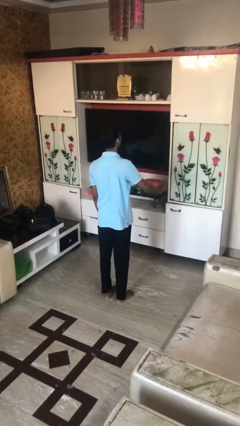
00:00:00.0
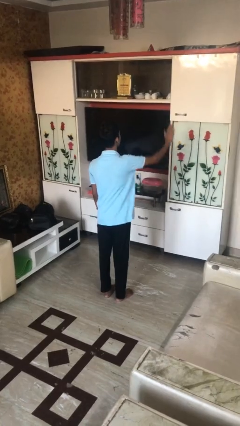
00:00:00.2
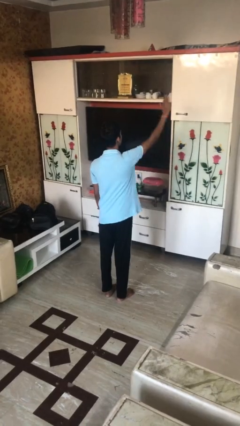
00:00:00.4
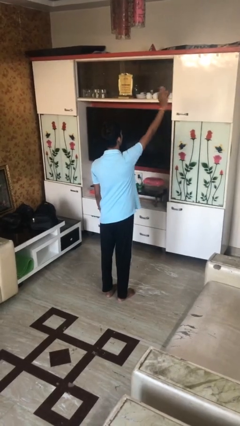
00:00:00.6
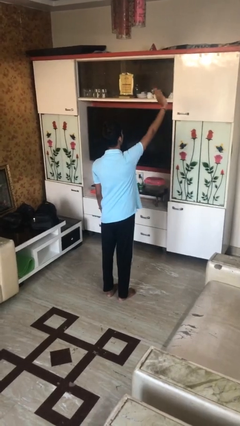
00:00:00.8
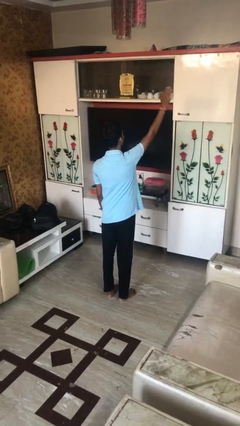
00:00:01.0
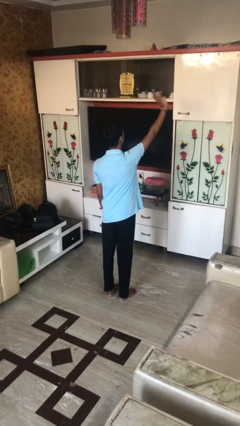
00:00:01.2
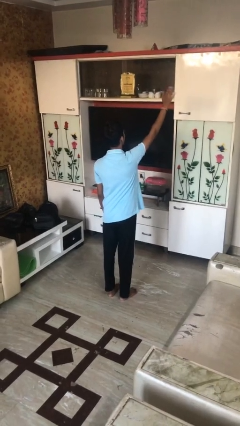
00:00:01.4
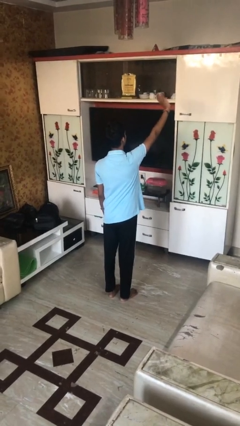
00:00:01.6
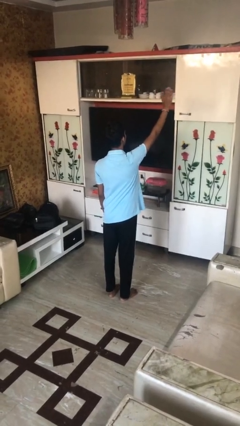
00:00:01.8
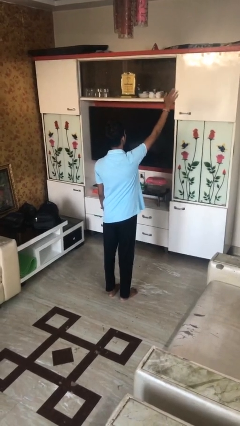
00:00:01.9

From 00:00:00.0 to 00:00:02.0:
person waves at person

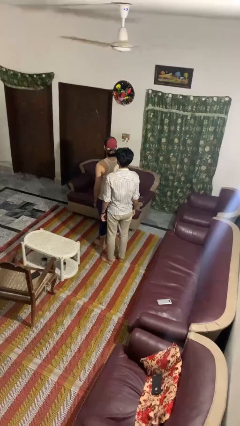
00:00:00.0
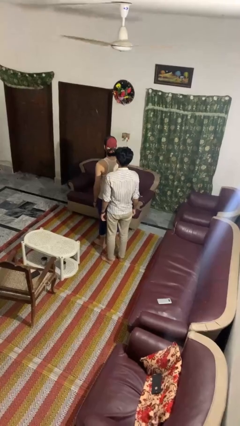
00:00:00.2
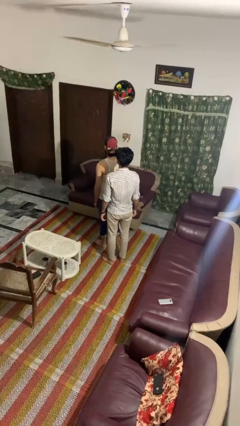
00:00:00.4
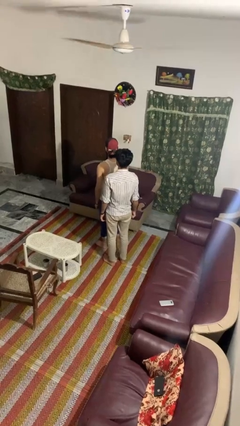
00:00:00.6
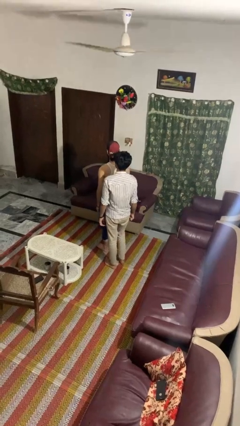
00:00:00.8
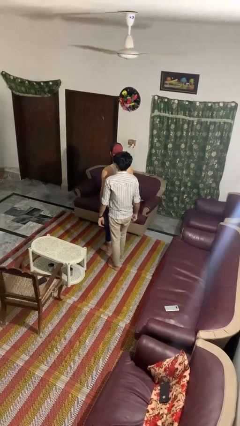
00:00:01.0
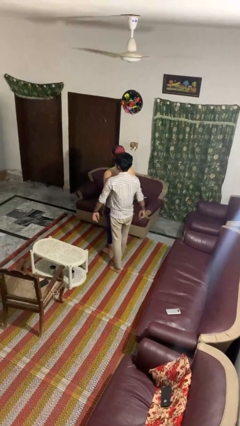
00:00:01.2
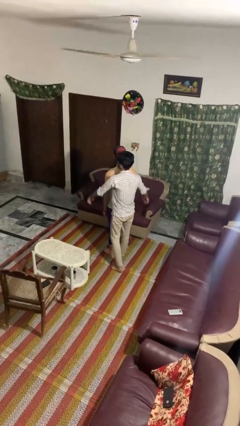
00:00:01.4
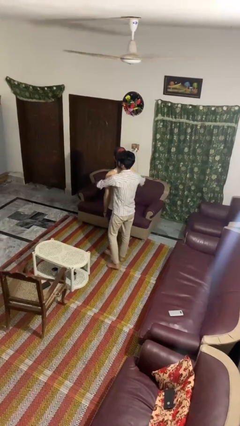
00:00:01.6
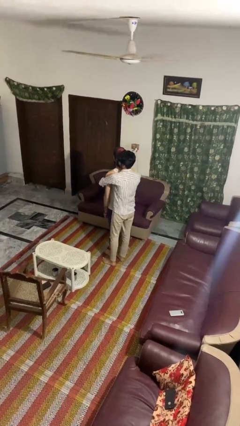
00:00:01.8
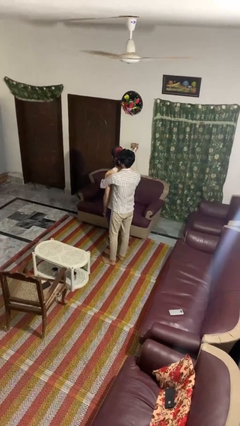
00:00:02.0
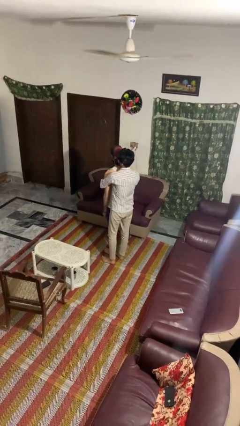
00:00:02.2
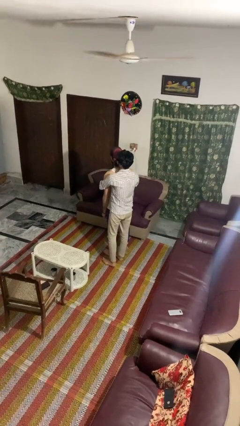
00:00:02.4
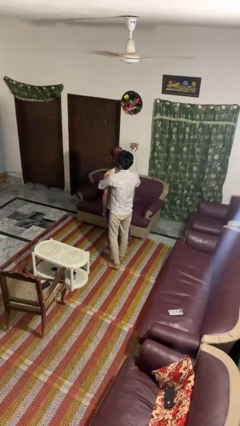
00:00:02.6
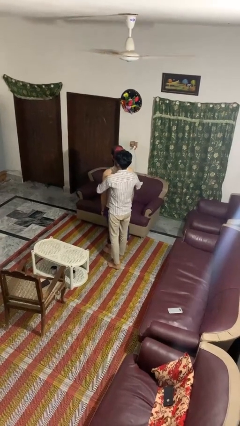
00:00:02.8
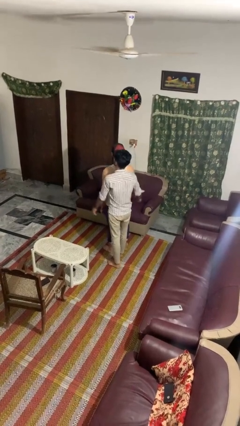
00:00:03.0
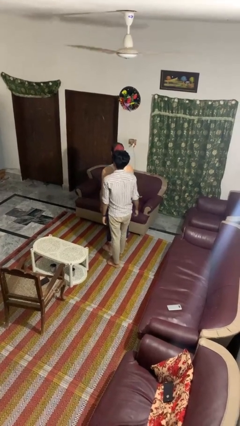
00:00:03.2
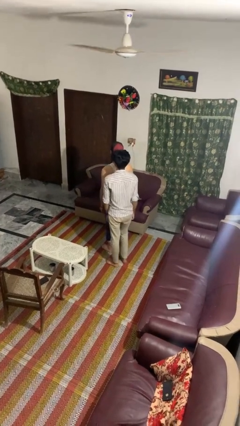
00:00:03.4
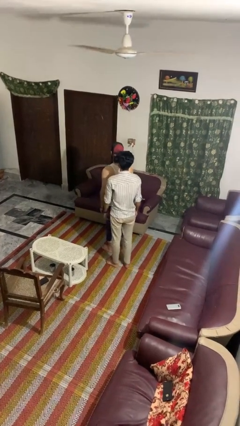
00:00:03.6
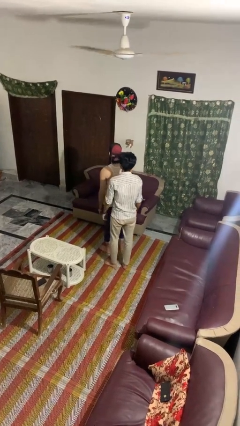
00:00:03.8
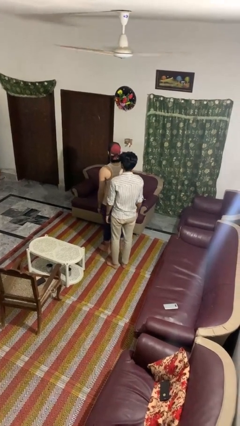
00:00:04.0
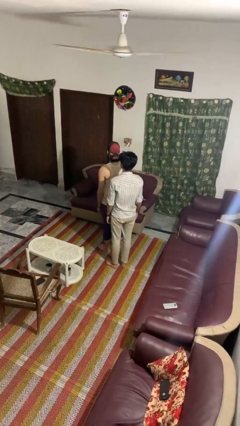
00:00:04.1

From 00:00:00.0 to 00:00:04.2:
person hugs person from behind

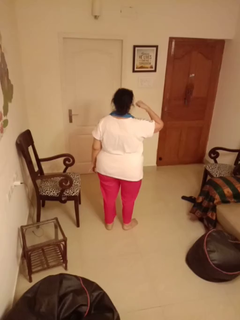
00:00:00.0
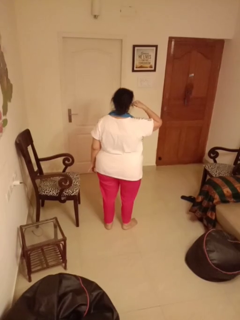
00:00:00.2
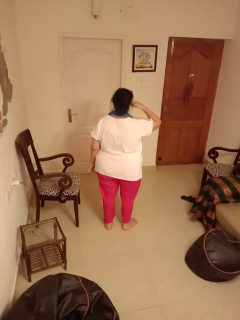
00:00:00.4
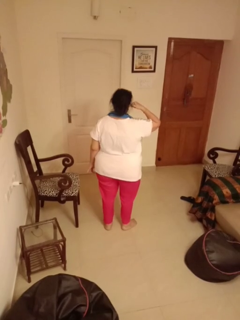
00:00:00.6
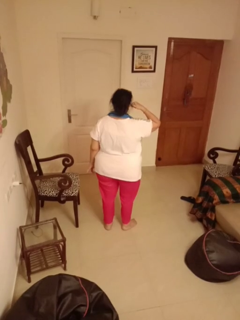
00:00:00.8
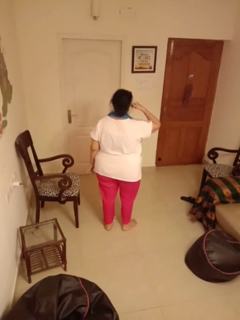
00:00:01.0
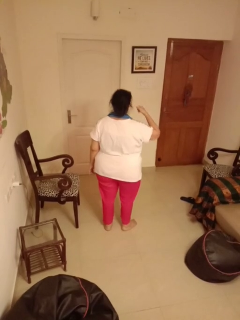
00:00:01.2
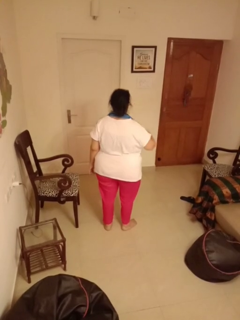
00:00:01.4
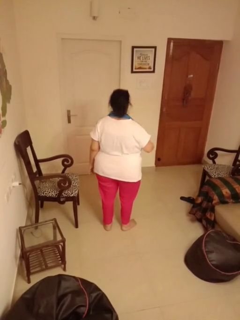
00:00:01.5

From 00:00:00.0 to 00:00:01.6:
person gestures call me

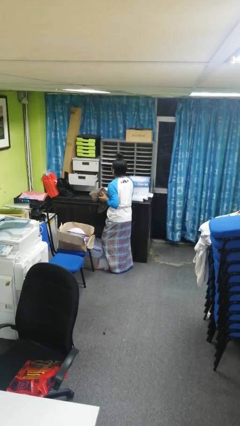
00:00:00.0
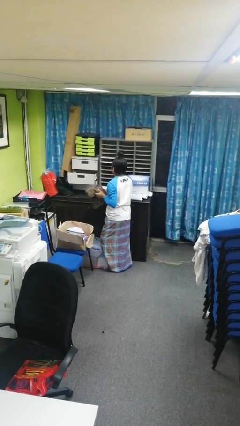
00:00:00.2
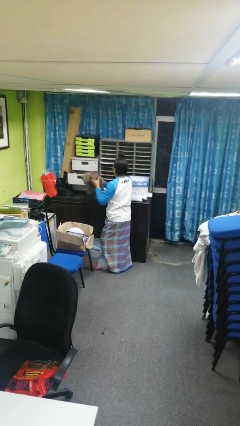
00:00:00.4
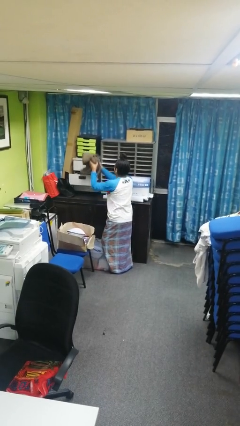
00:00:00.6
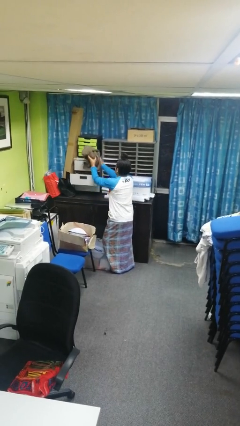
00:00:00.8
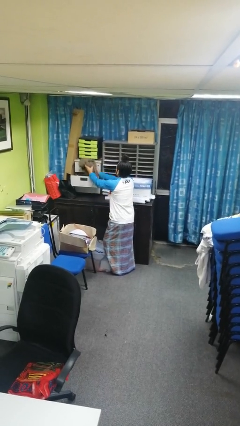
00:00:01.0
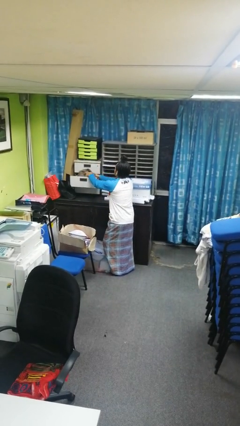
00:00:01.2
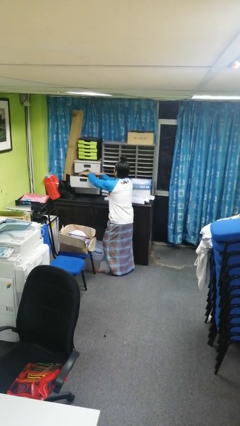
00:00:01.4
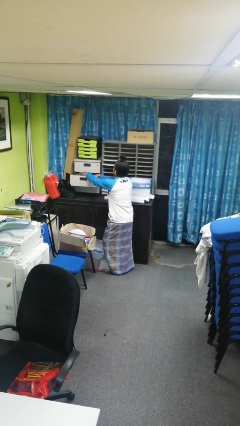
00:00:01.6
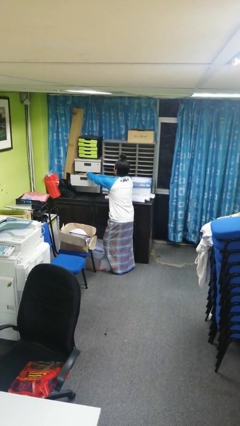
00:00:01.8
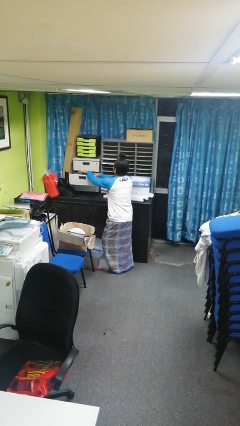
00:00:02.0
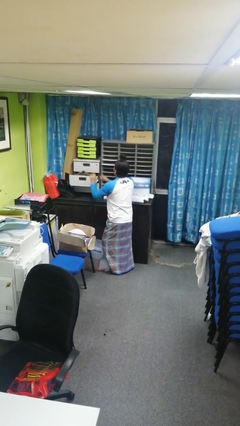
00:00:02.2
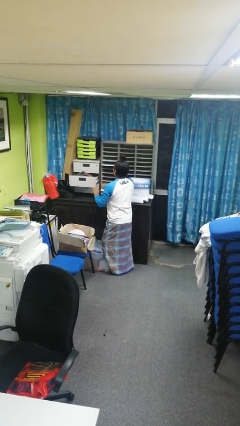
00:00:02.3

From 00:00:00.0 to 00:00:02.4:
person puts clothes into dresser

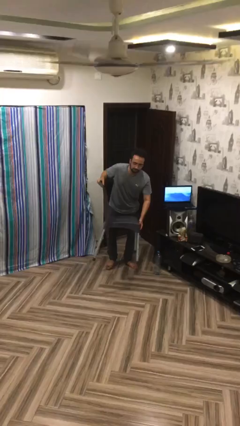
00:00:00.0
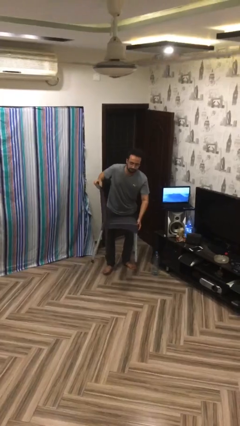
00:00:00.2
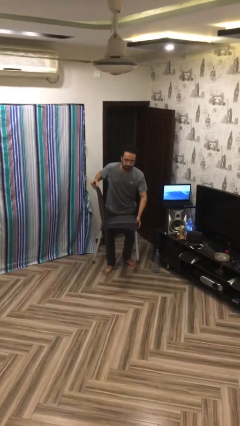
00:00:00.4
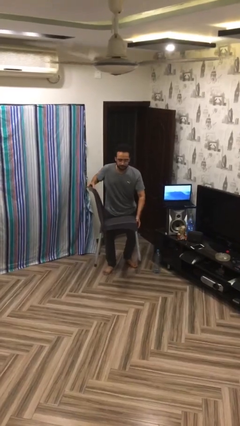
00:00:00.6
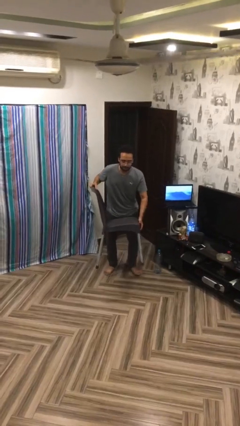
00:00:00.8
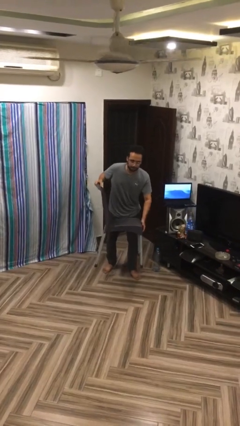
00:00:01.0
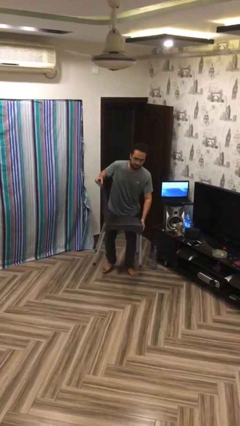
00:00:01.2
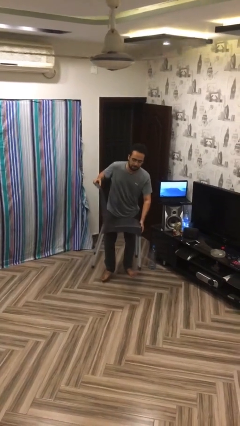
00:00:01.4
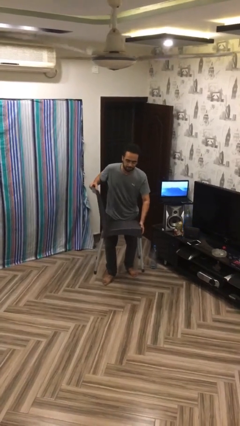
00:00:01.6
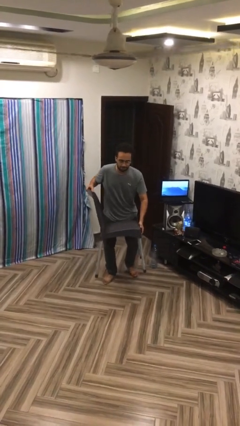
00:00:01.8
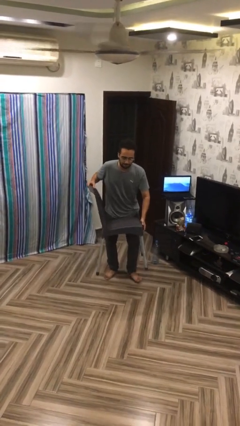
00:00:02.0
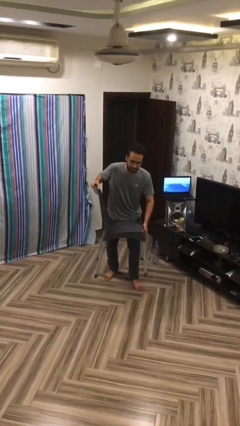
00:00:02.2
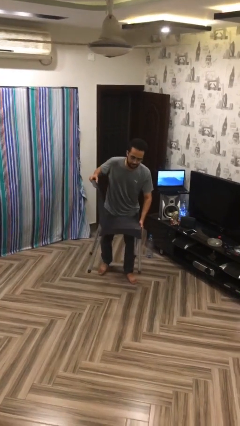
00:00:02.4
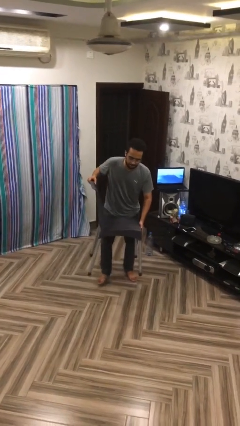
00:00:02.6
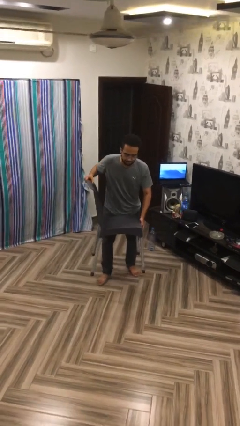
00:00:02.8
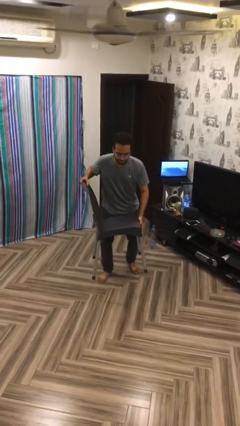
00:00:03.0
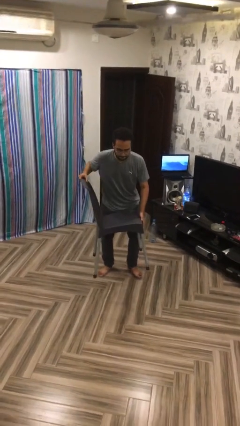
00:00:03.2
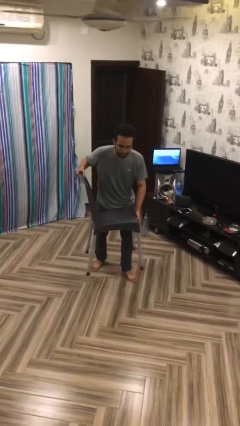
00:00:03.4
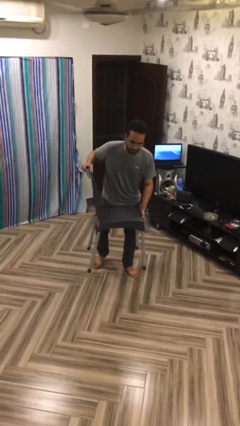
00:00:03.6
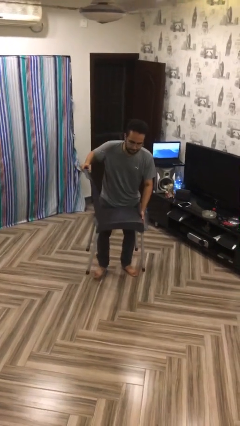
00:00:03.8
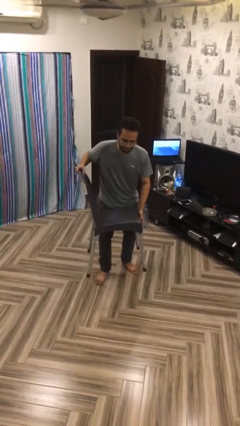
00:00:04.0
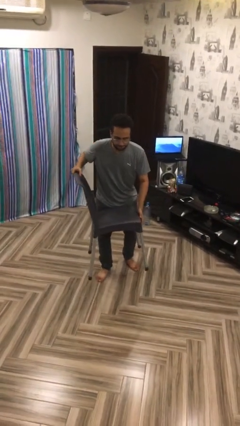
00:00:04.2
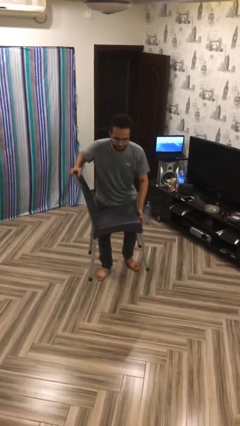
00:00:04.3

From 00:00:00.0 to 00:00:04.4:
person carries heavy object

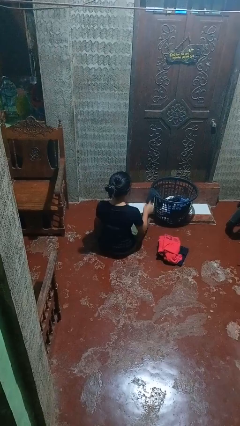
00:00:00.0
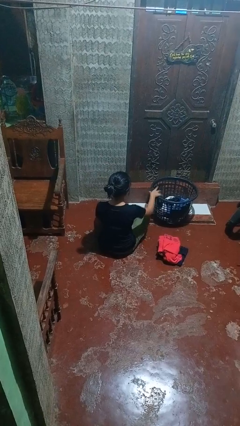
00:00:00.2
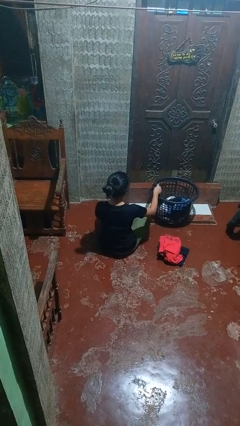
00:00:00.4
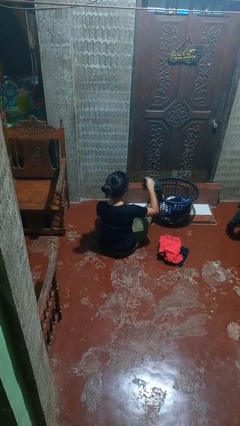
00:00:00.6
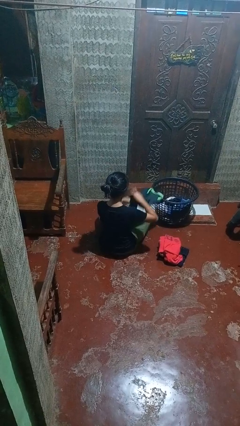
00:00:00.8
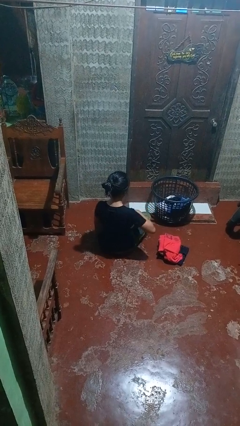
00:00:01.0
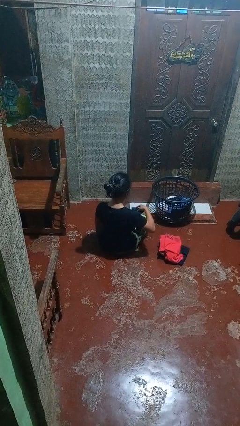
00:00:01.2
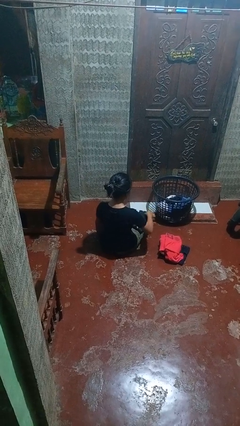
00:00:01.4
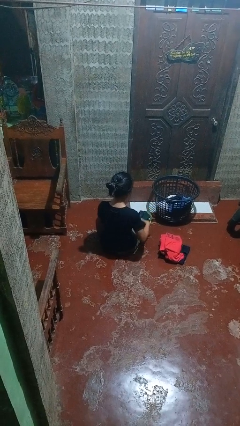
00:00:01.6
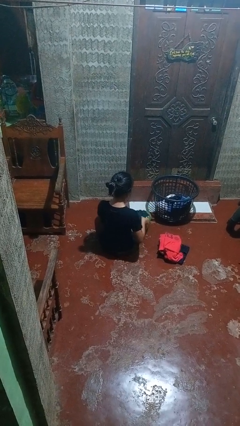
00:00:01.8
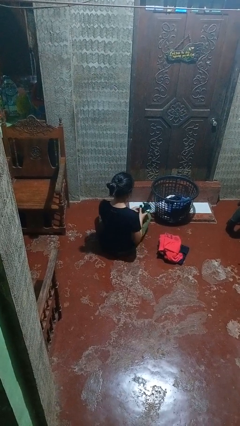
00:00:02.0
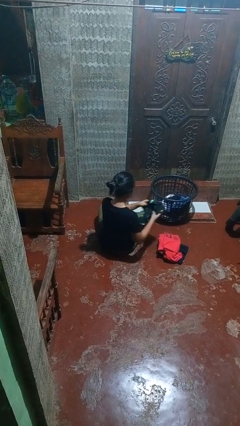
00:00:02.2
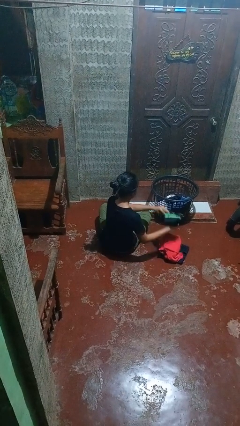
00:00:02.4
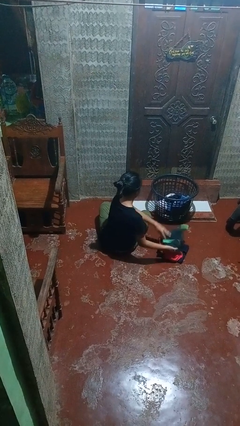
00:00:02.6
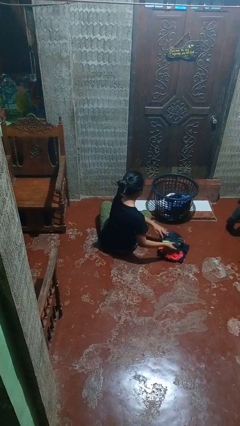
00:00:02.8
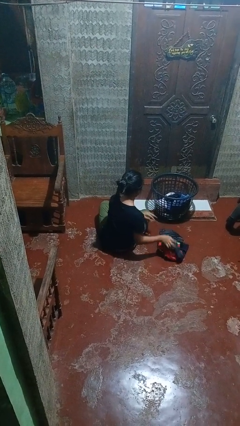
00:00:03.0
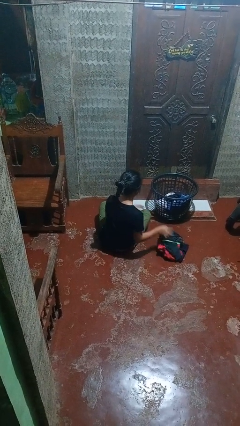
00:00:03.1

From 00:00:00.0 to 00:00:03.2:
person folds shirt
